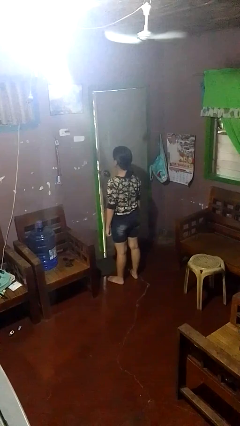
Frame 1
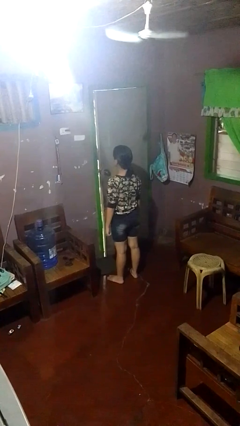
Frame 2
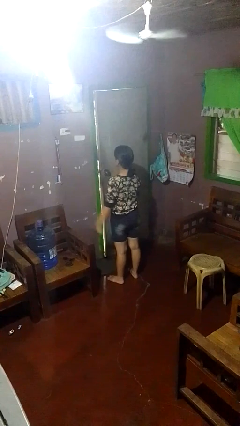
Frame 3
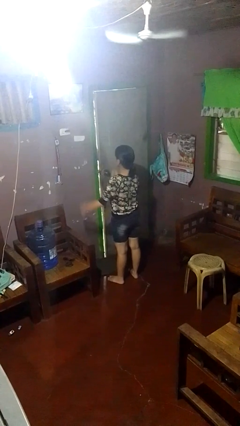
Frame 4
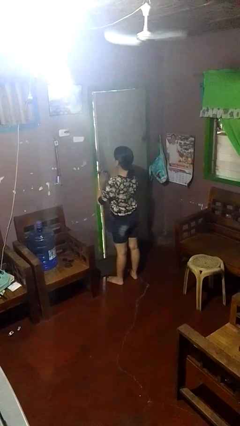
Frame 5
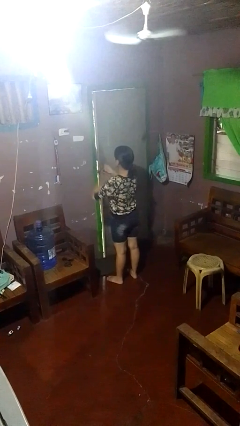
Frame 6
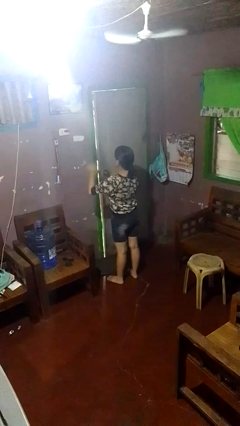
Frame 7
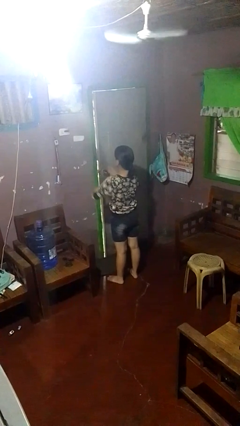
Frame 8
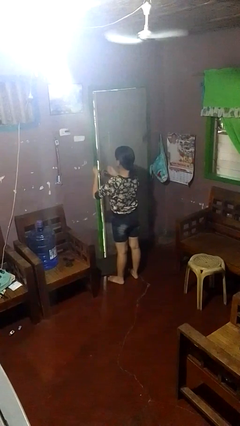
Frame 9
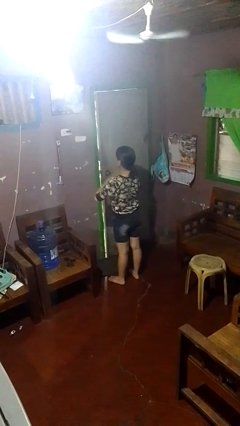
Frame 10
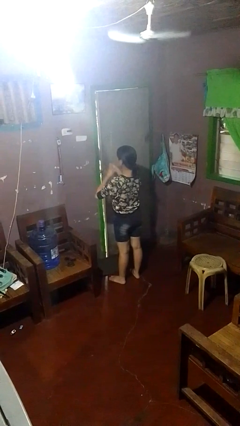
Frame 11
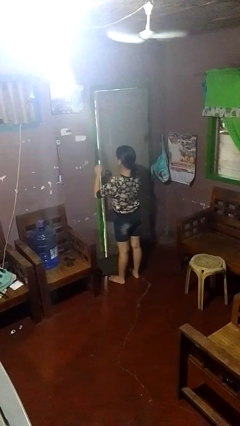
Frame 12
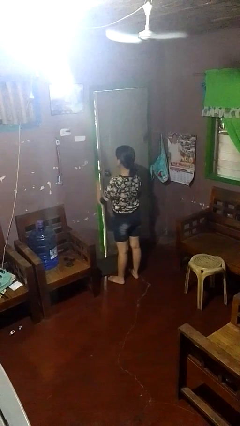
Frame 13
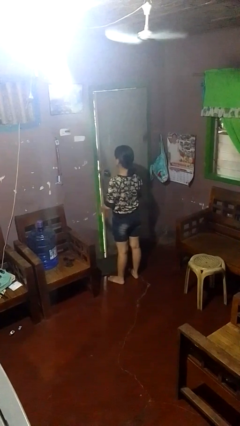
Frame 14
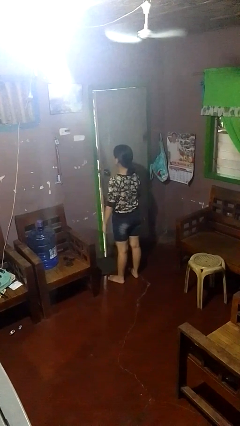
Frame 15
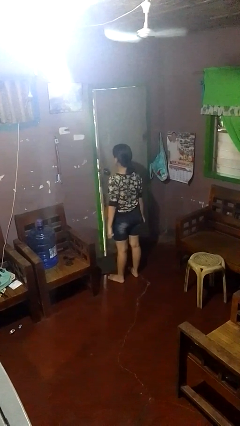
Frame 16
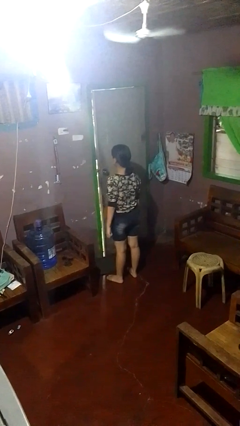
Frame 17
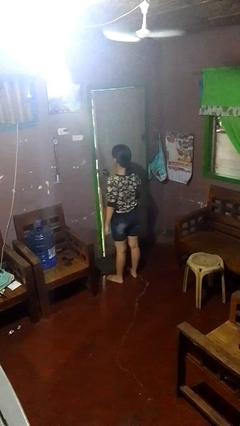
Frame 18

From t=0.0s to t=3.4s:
person drums on chest

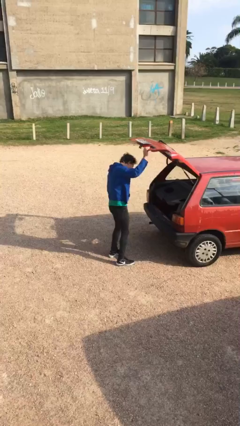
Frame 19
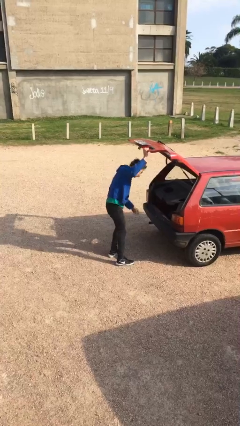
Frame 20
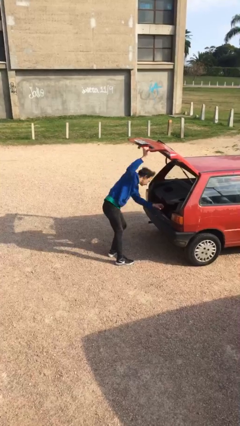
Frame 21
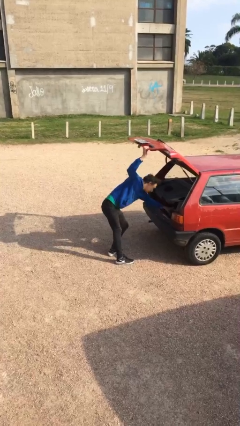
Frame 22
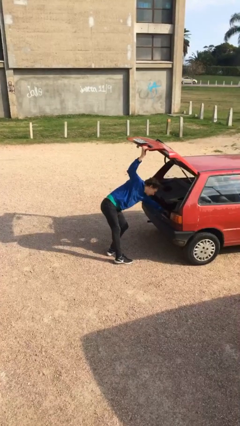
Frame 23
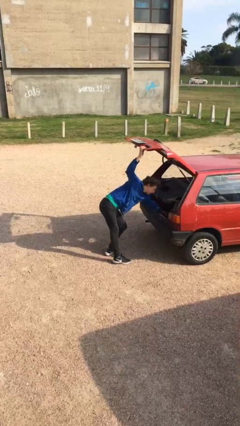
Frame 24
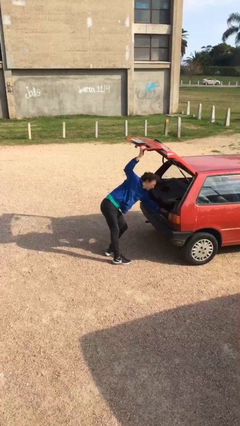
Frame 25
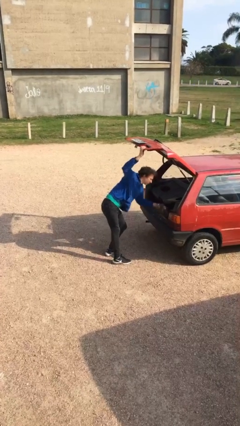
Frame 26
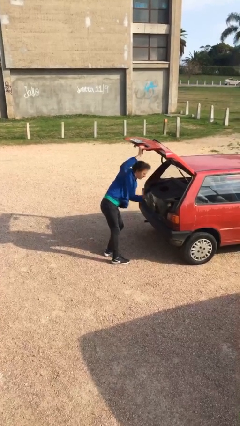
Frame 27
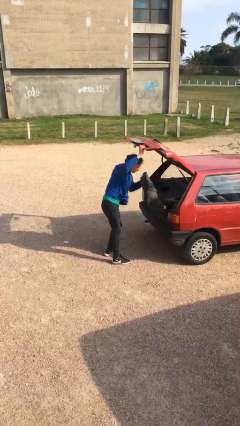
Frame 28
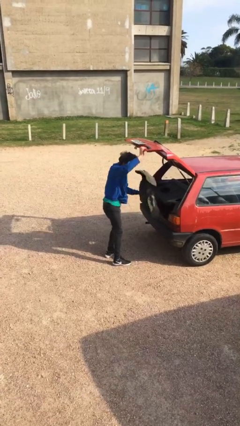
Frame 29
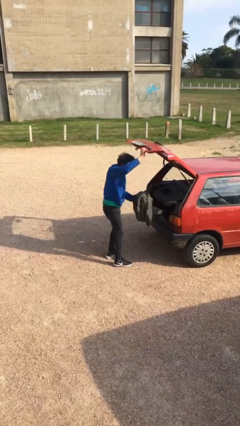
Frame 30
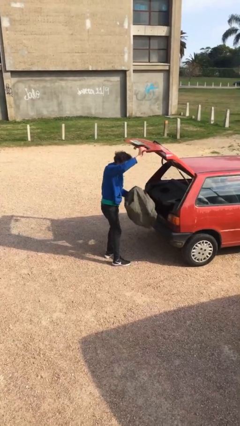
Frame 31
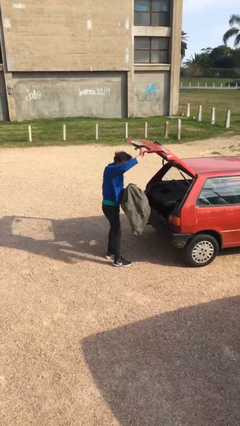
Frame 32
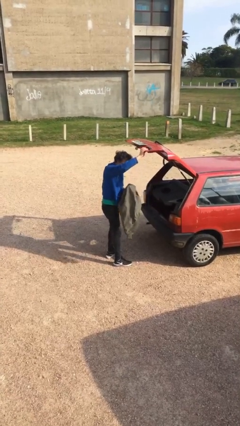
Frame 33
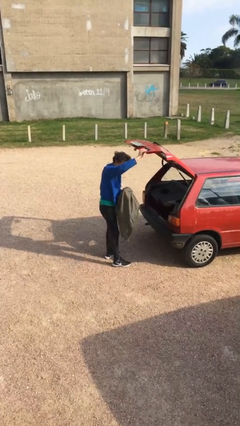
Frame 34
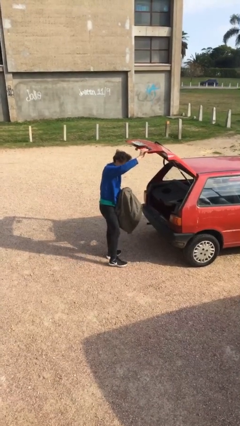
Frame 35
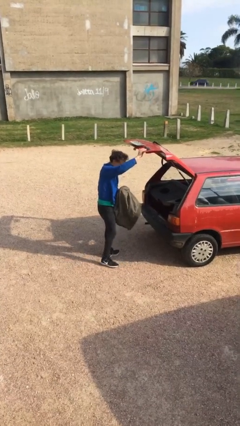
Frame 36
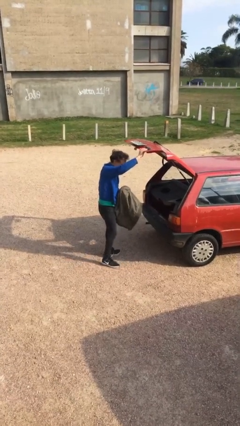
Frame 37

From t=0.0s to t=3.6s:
person unloads car

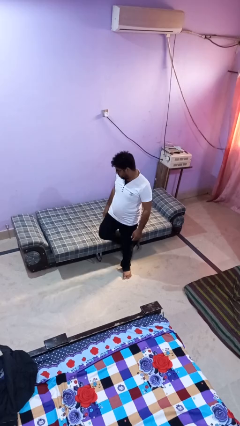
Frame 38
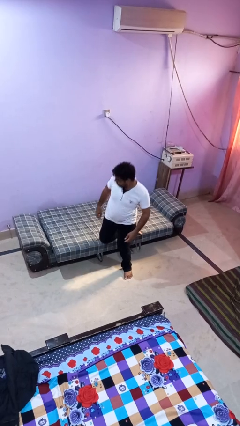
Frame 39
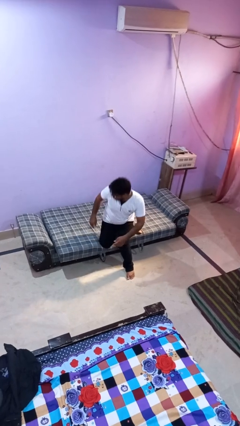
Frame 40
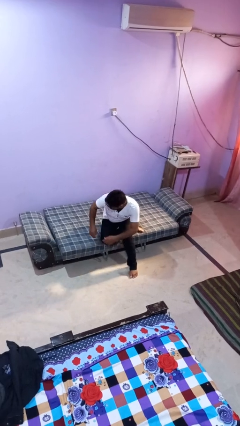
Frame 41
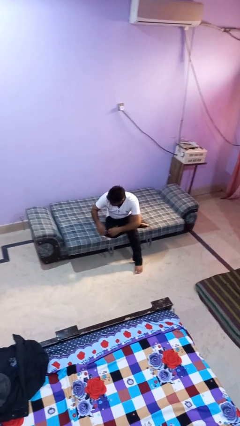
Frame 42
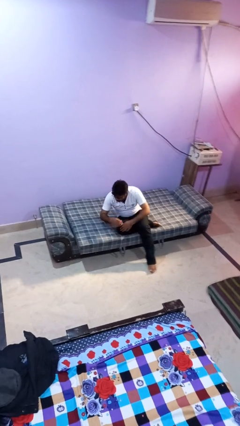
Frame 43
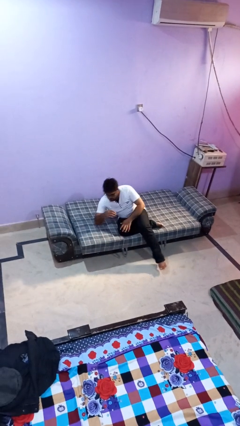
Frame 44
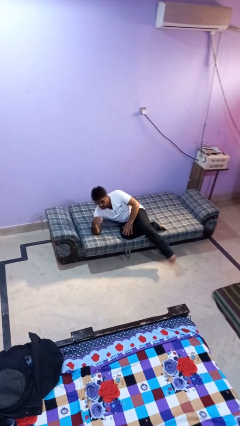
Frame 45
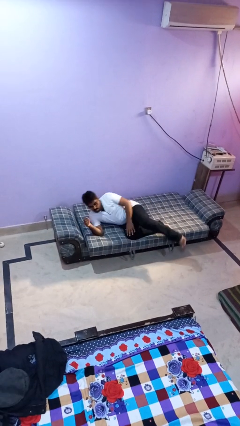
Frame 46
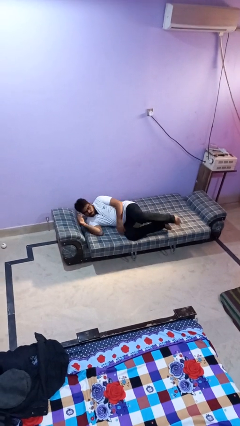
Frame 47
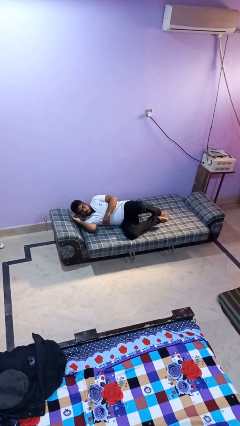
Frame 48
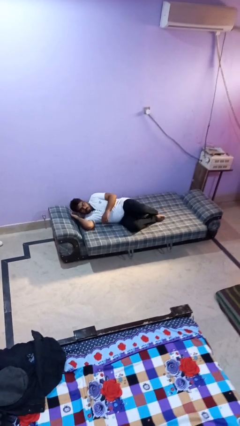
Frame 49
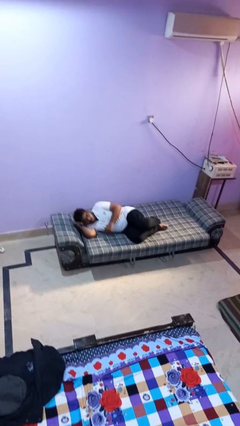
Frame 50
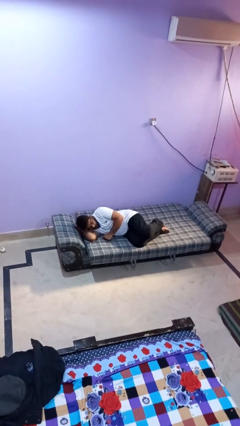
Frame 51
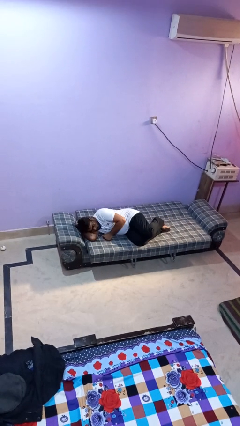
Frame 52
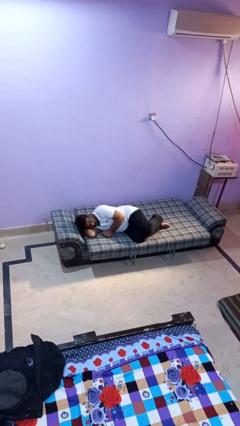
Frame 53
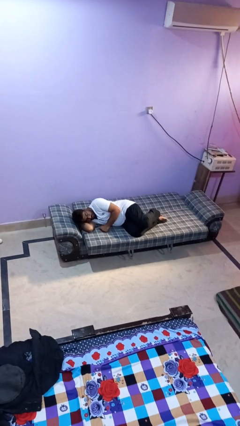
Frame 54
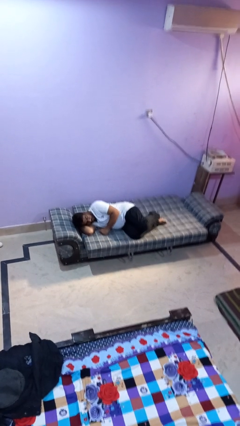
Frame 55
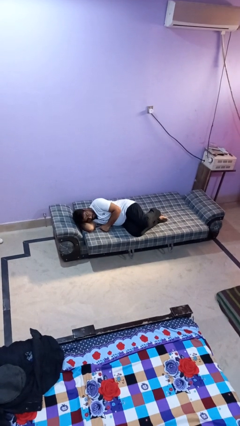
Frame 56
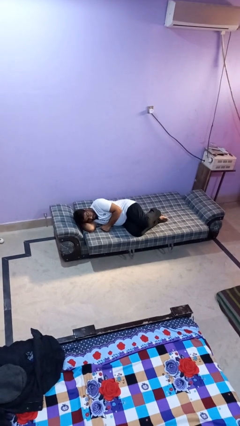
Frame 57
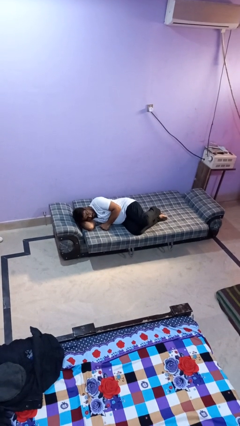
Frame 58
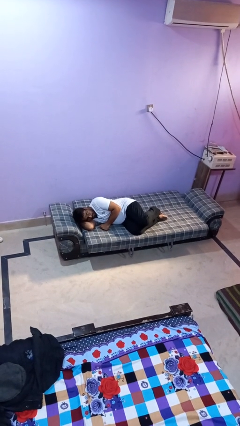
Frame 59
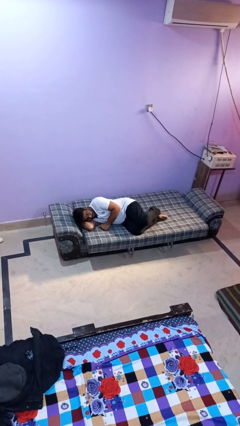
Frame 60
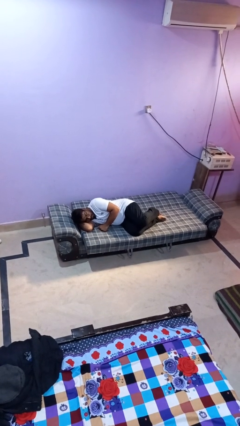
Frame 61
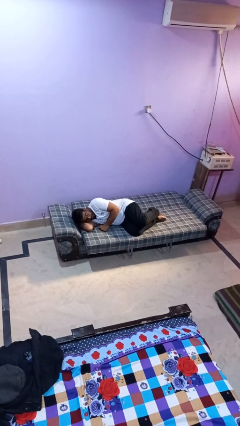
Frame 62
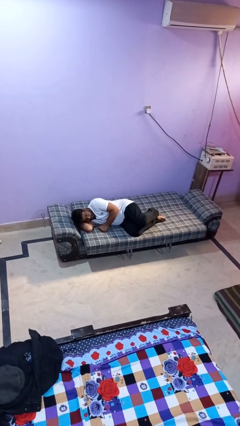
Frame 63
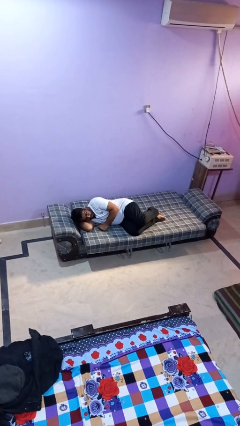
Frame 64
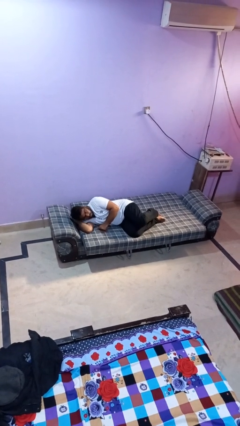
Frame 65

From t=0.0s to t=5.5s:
person lies down on bed

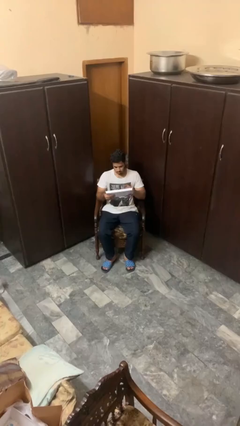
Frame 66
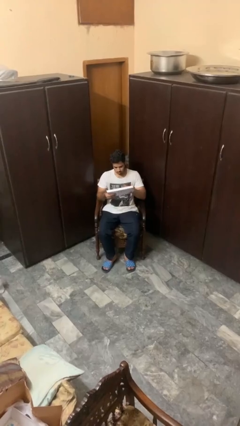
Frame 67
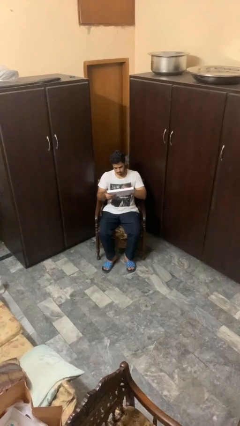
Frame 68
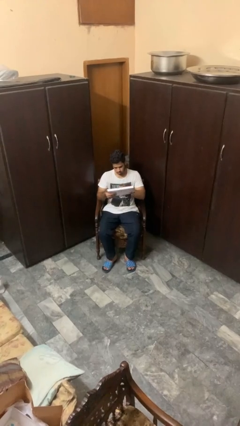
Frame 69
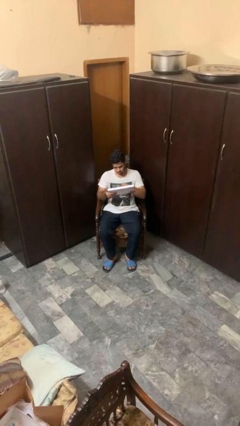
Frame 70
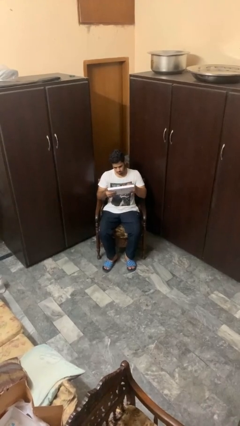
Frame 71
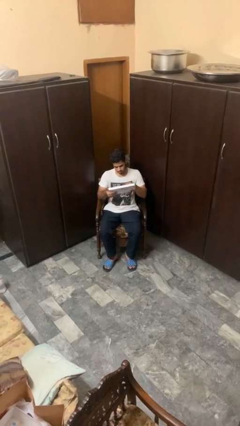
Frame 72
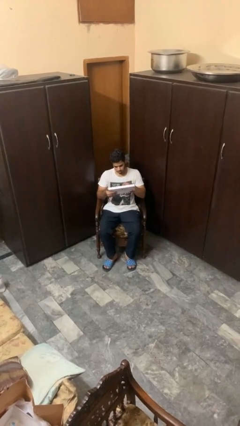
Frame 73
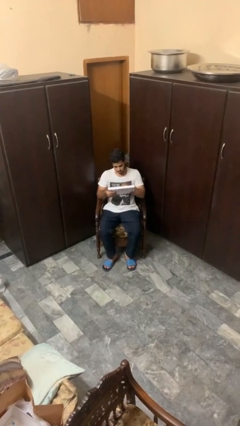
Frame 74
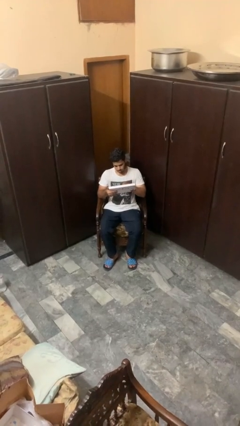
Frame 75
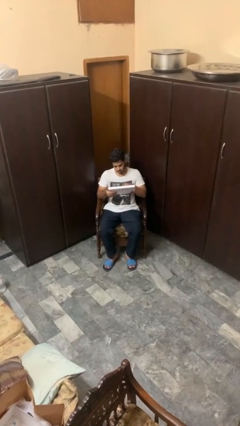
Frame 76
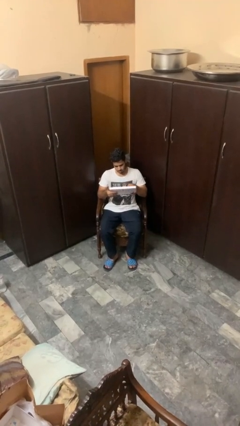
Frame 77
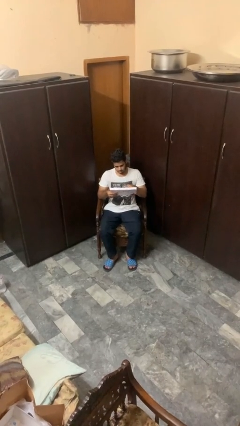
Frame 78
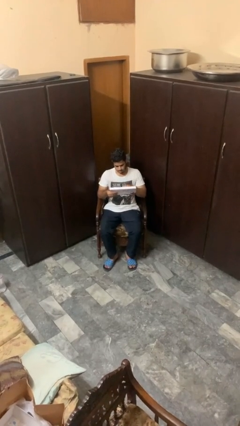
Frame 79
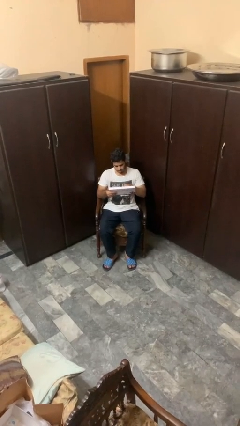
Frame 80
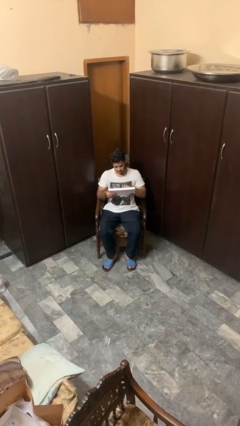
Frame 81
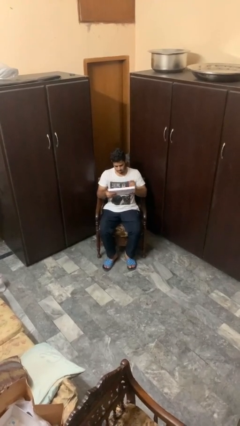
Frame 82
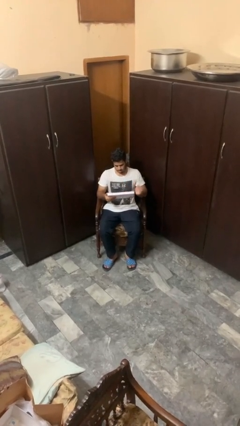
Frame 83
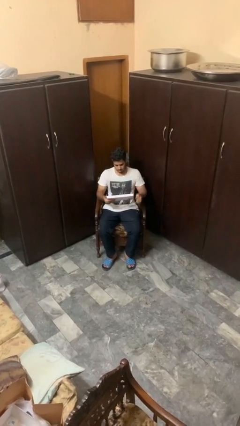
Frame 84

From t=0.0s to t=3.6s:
person interacts with tablet

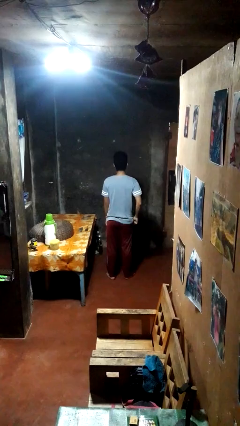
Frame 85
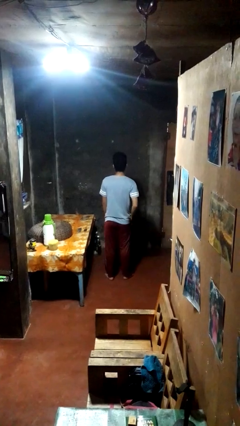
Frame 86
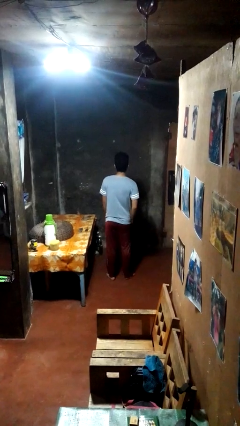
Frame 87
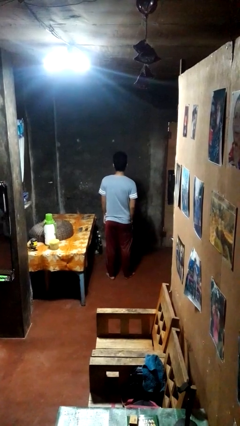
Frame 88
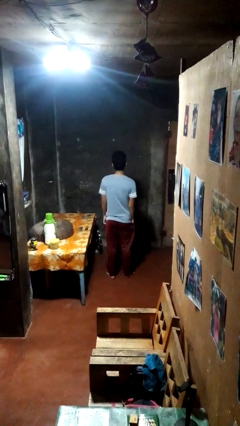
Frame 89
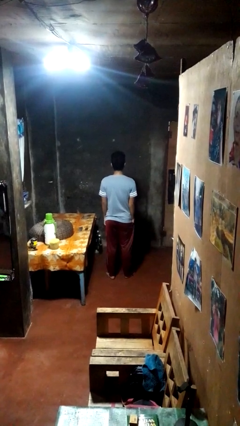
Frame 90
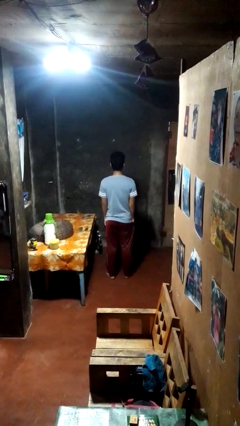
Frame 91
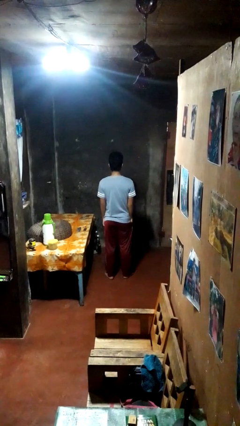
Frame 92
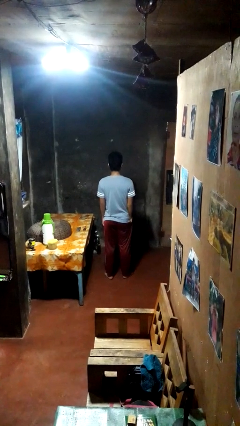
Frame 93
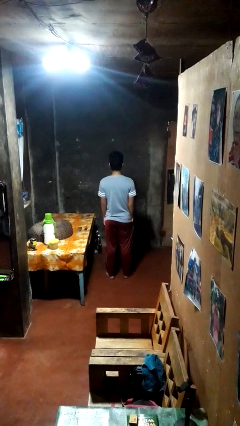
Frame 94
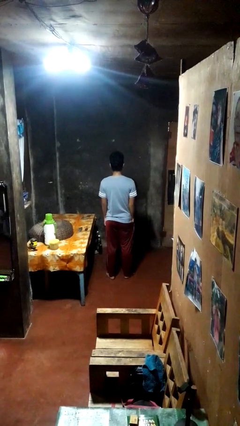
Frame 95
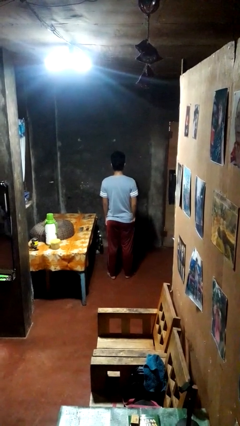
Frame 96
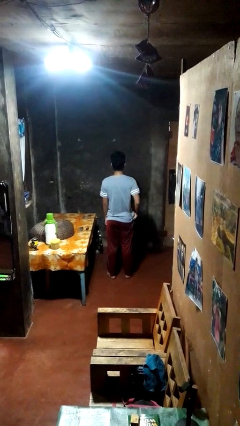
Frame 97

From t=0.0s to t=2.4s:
person puts hands in back pockets
